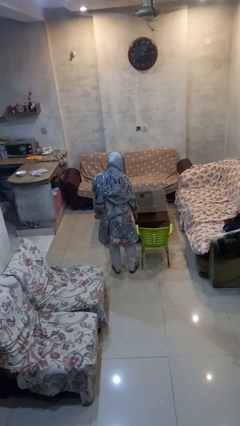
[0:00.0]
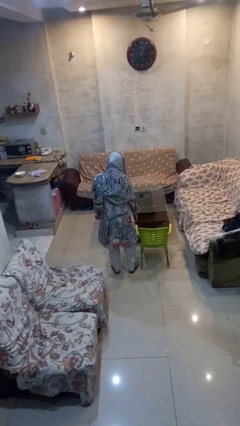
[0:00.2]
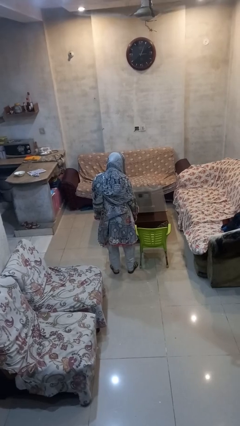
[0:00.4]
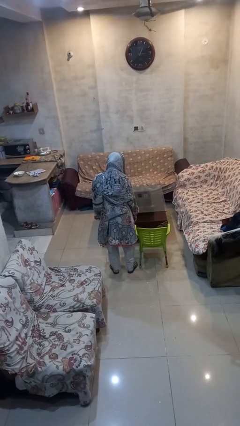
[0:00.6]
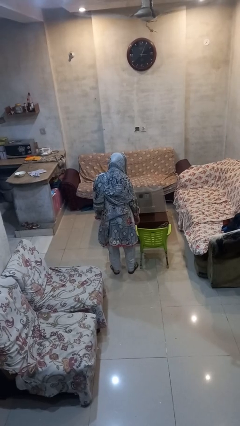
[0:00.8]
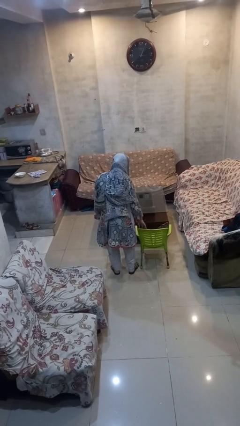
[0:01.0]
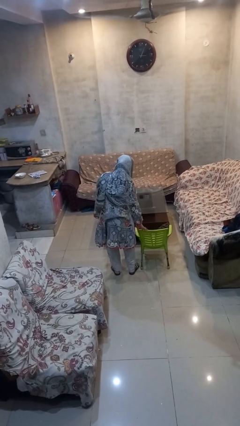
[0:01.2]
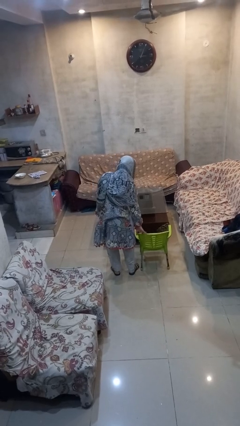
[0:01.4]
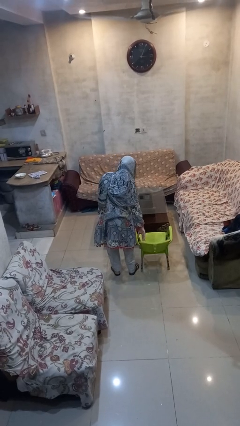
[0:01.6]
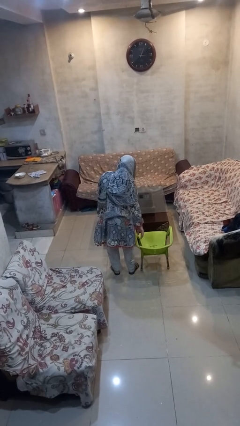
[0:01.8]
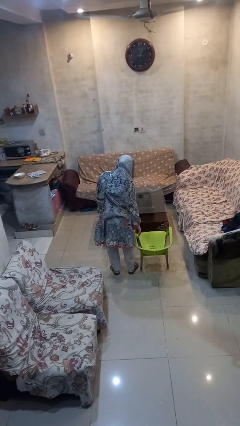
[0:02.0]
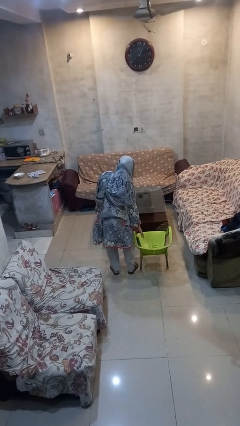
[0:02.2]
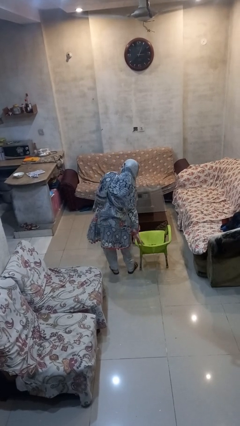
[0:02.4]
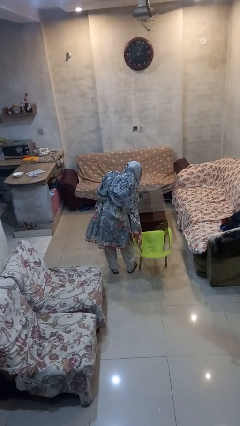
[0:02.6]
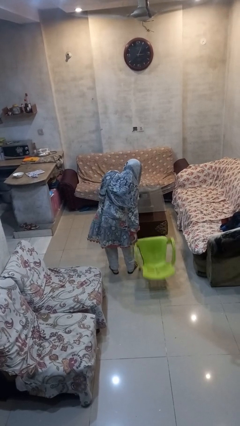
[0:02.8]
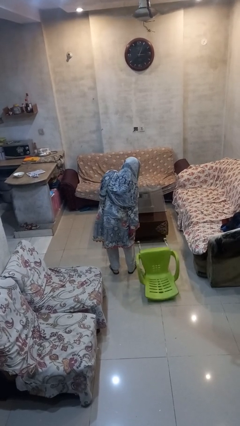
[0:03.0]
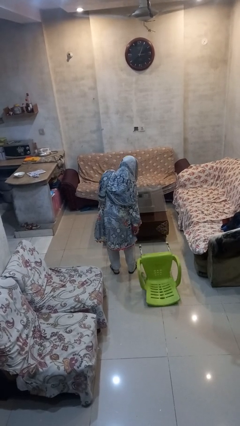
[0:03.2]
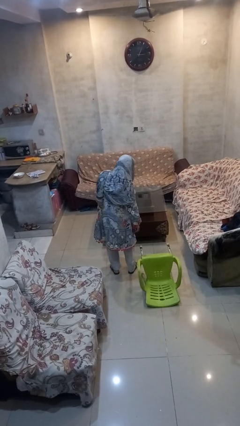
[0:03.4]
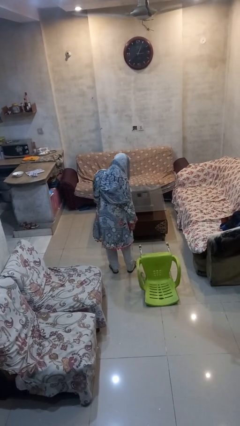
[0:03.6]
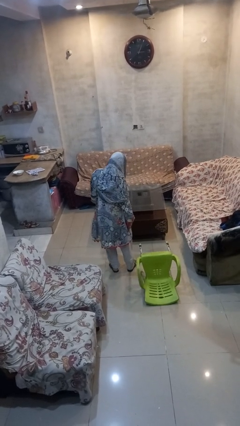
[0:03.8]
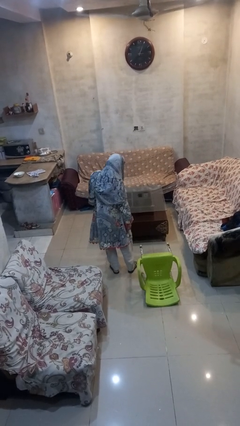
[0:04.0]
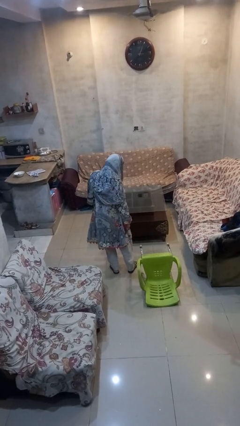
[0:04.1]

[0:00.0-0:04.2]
person knocks over furniture

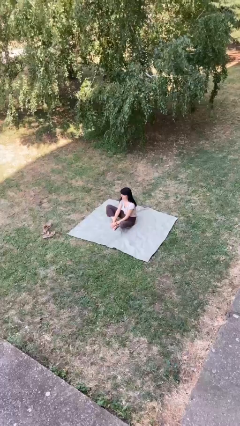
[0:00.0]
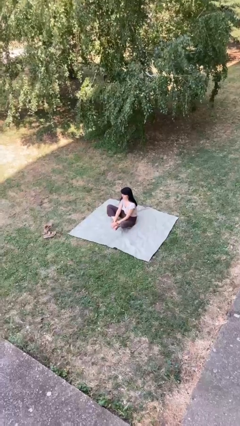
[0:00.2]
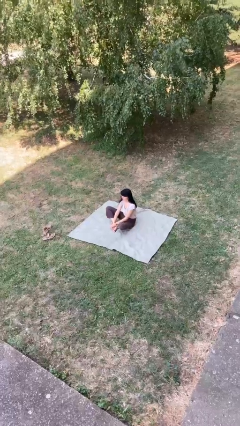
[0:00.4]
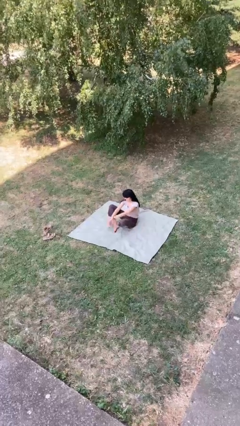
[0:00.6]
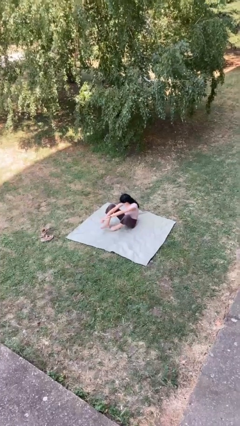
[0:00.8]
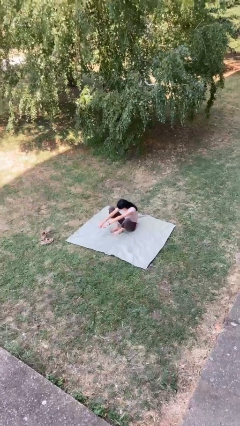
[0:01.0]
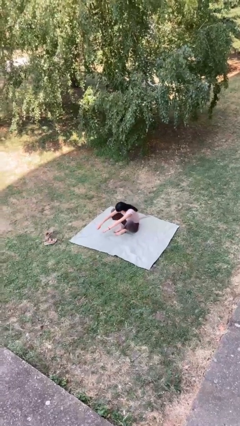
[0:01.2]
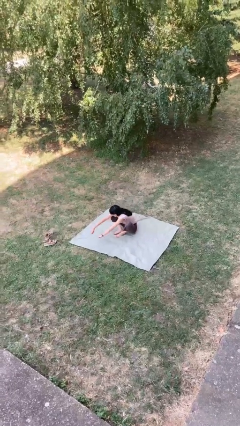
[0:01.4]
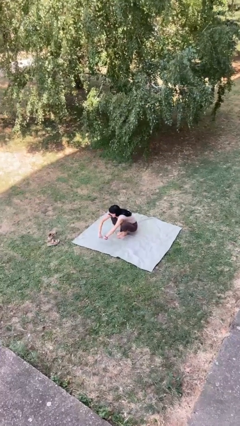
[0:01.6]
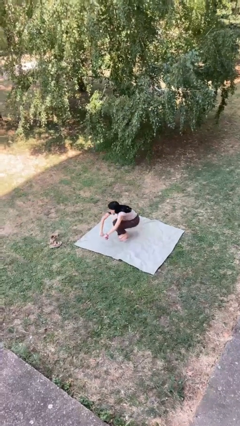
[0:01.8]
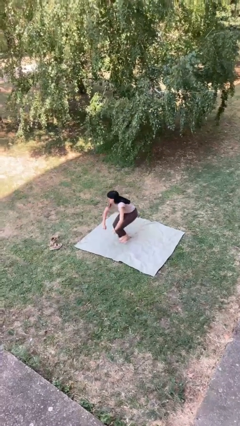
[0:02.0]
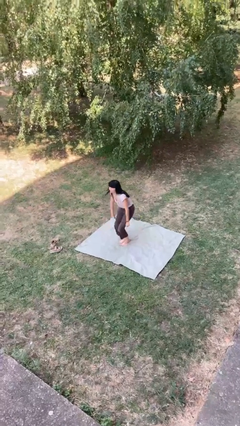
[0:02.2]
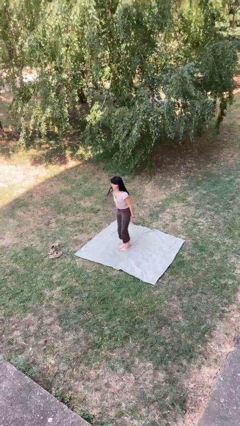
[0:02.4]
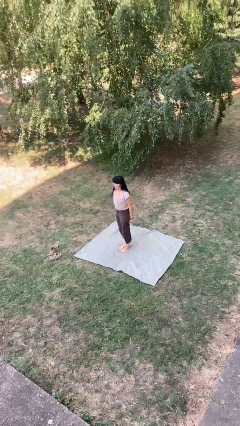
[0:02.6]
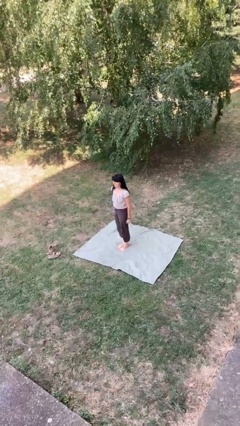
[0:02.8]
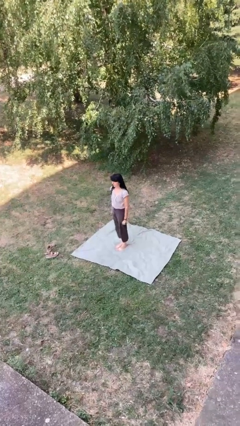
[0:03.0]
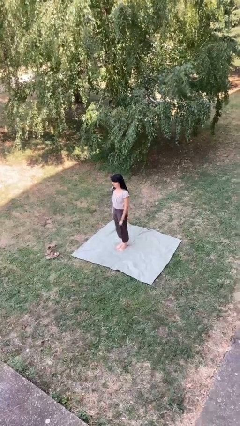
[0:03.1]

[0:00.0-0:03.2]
person stands up from floor

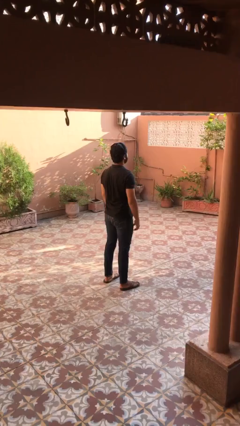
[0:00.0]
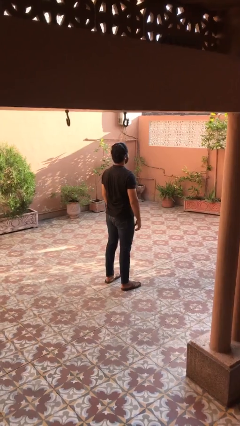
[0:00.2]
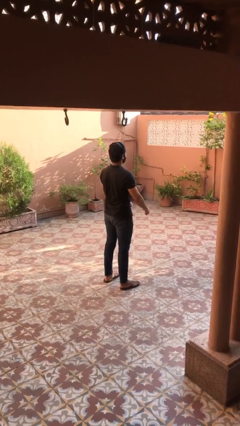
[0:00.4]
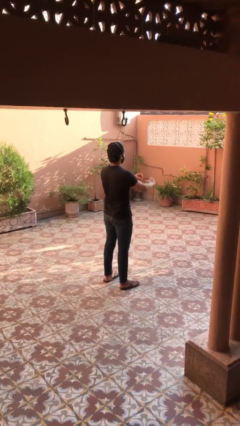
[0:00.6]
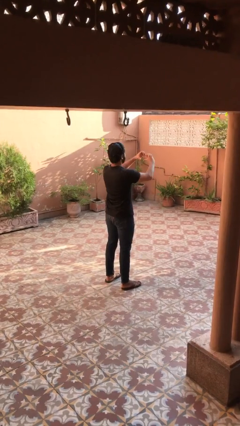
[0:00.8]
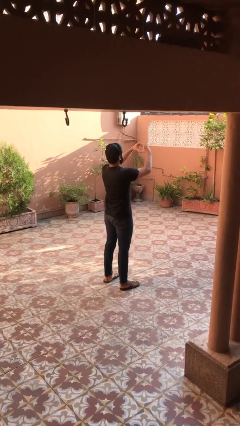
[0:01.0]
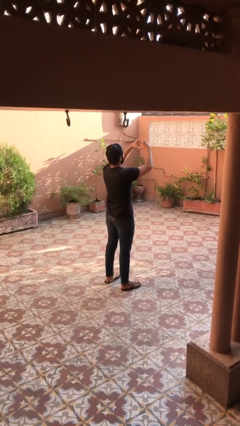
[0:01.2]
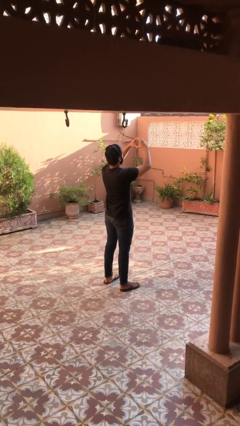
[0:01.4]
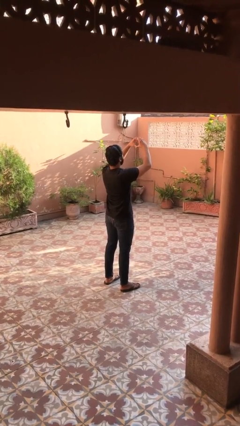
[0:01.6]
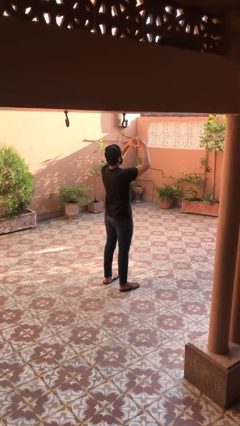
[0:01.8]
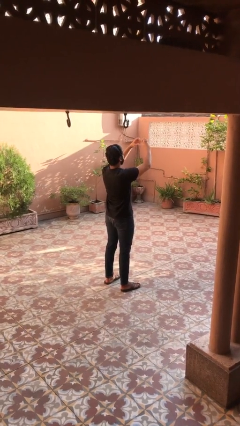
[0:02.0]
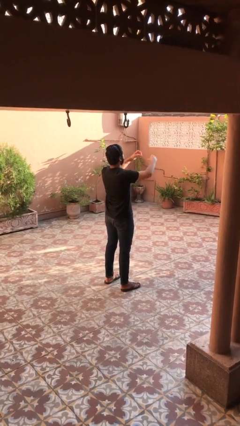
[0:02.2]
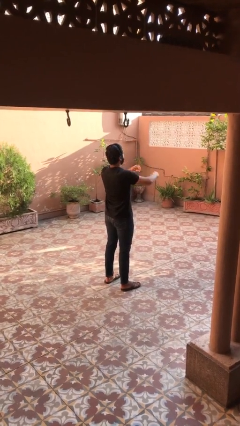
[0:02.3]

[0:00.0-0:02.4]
person gestures heart

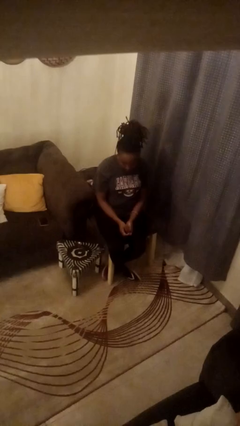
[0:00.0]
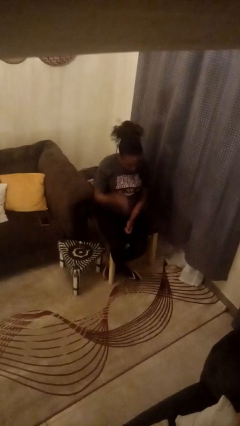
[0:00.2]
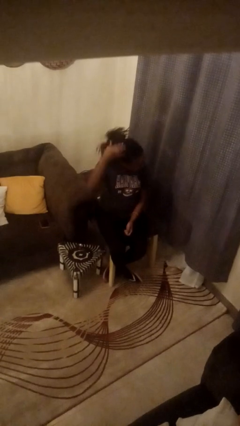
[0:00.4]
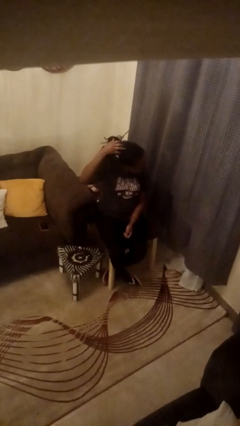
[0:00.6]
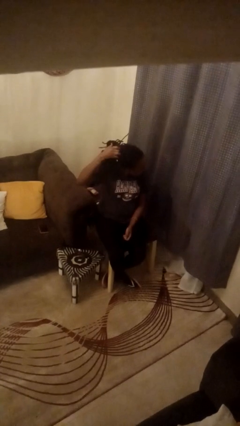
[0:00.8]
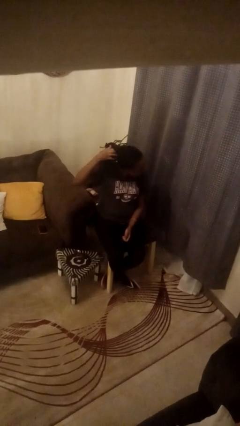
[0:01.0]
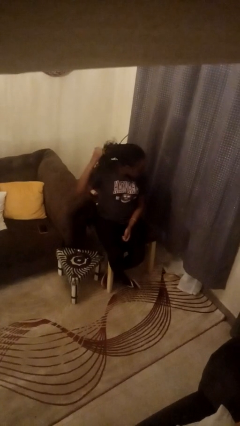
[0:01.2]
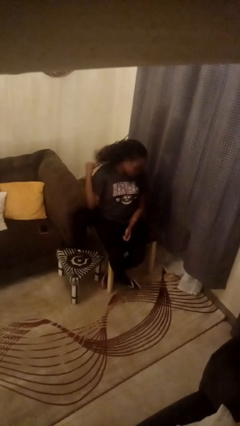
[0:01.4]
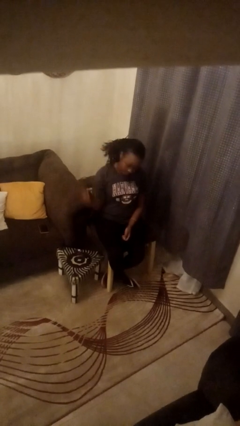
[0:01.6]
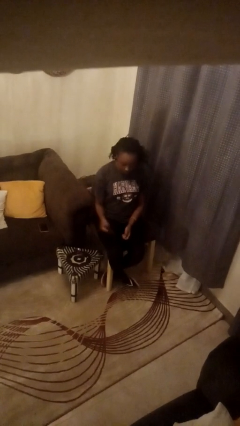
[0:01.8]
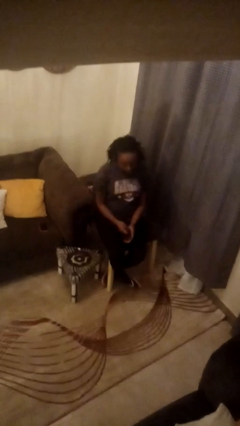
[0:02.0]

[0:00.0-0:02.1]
person takes off hairtie

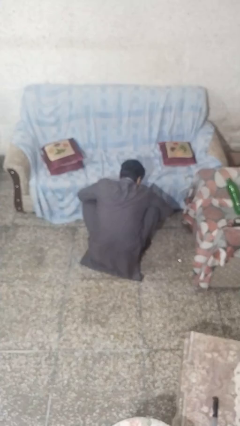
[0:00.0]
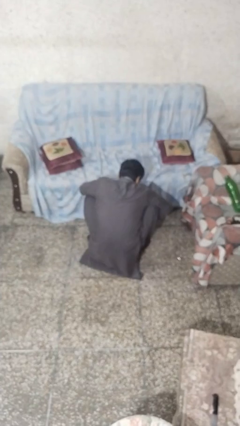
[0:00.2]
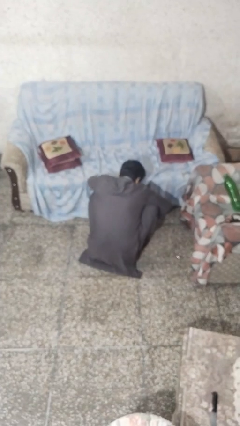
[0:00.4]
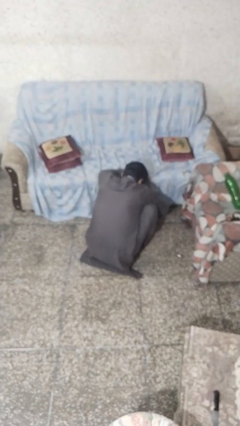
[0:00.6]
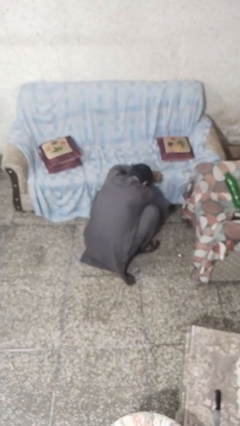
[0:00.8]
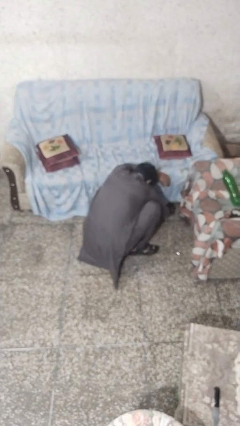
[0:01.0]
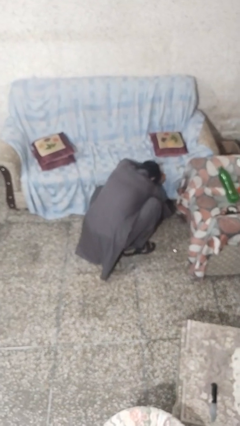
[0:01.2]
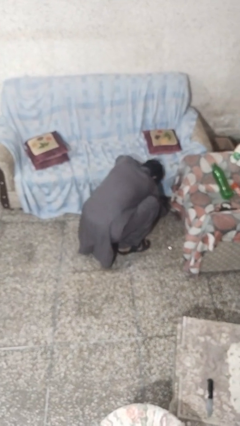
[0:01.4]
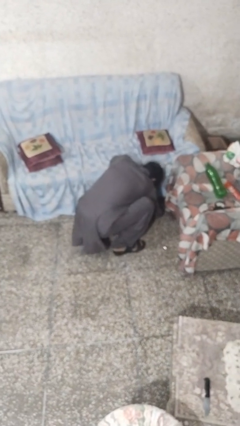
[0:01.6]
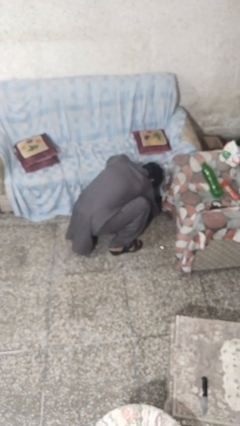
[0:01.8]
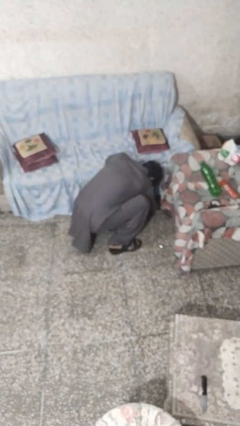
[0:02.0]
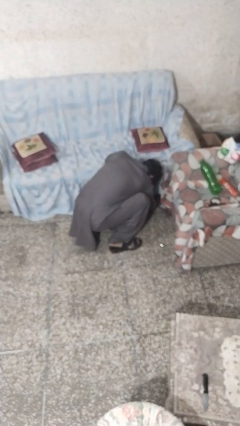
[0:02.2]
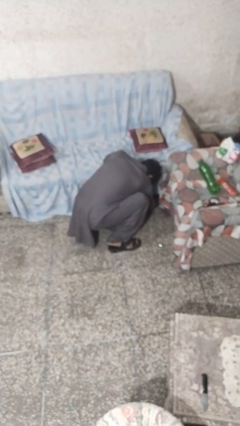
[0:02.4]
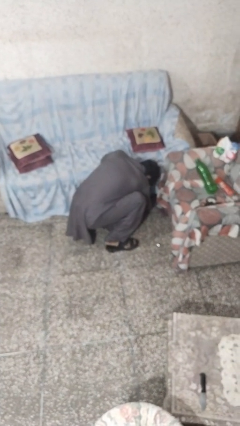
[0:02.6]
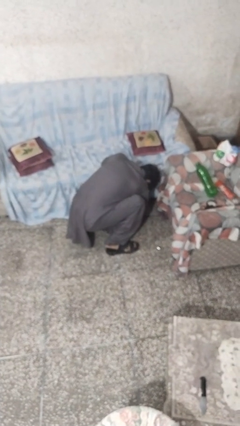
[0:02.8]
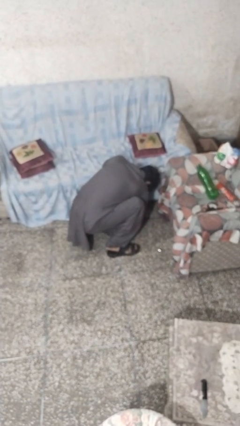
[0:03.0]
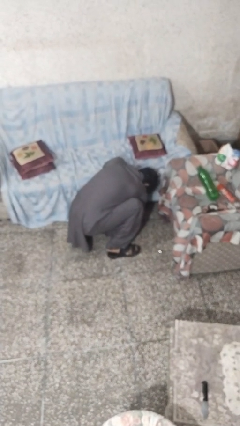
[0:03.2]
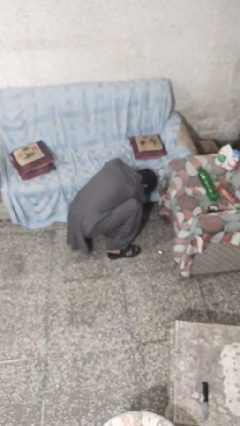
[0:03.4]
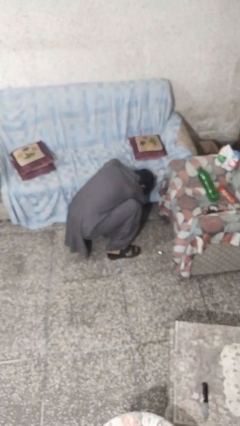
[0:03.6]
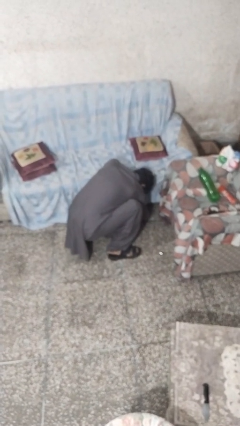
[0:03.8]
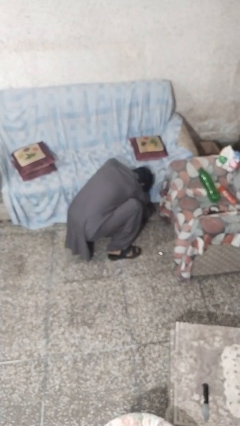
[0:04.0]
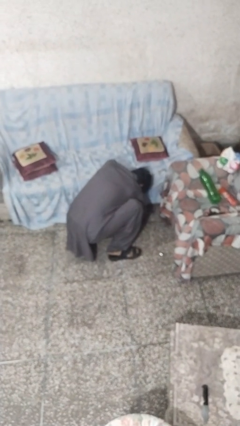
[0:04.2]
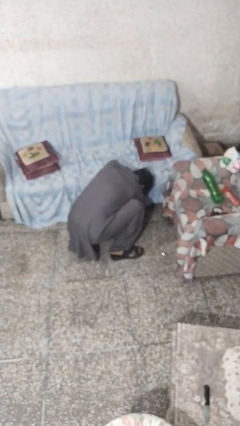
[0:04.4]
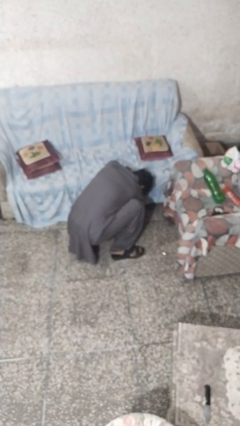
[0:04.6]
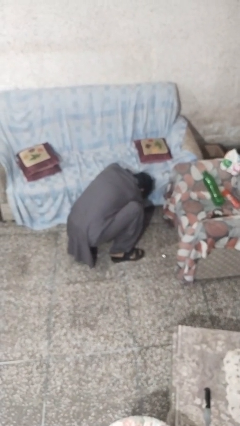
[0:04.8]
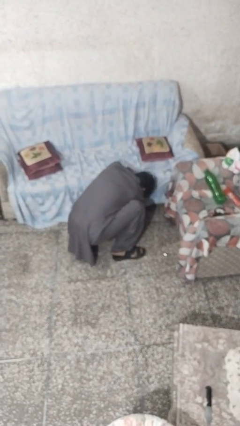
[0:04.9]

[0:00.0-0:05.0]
person searches under couch

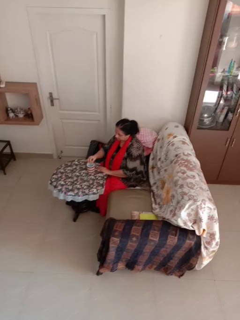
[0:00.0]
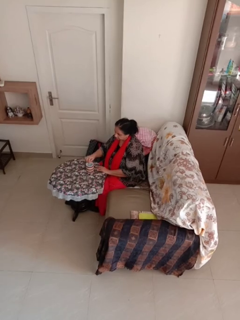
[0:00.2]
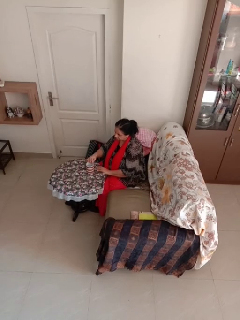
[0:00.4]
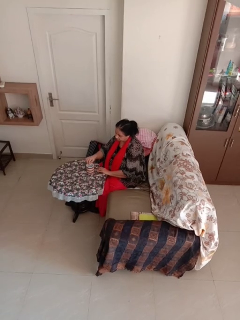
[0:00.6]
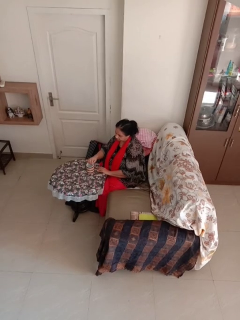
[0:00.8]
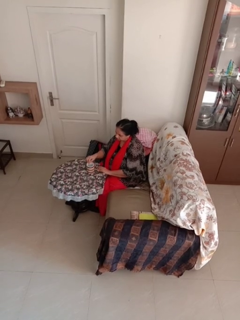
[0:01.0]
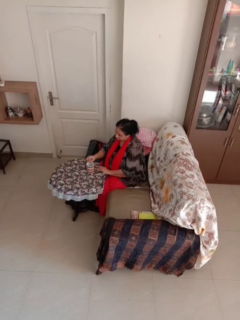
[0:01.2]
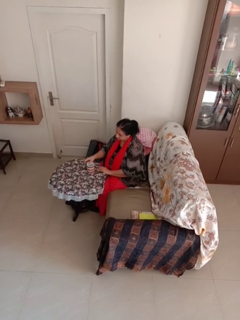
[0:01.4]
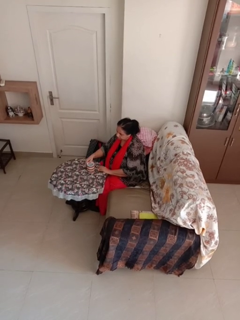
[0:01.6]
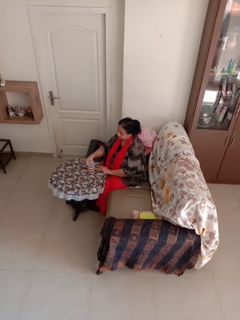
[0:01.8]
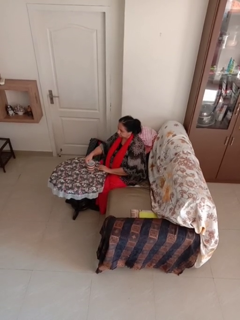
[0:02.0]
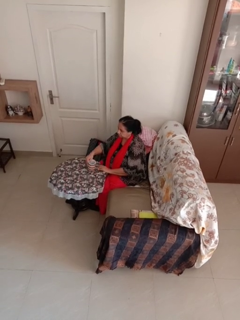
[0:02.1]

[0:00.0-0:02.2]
person stirs mug
